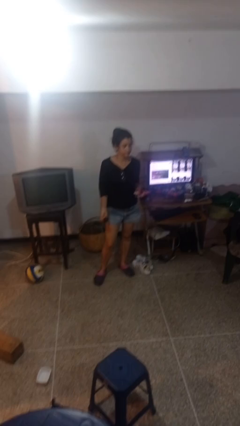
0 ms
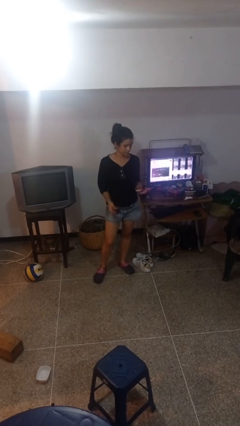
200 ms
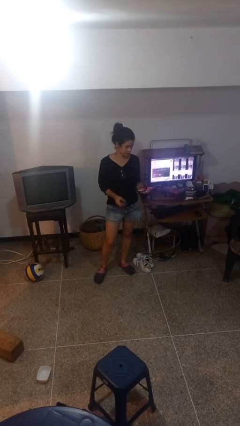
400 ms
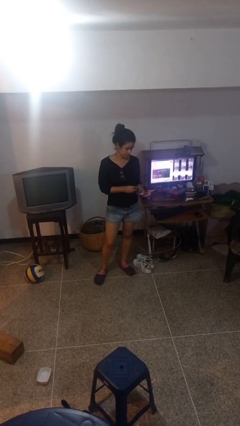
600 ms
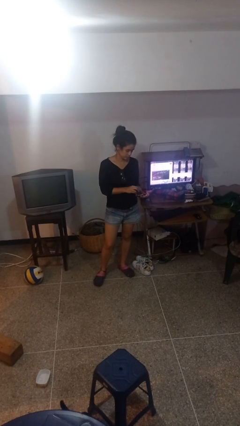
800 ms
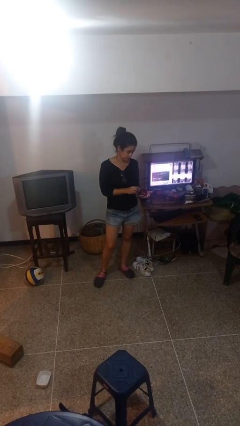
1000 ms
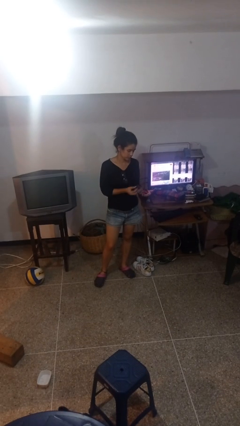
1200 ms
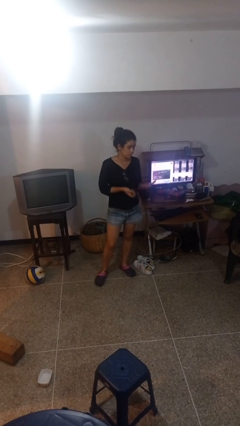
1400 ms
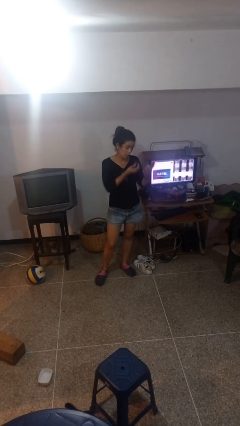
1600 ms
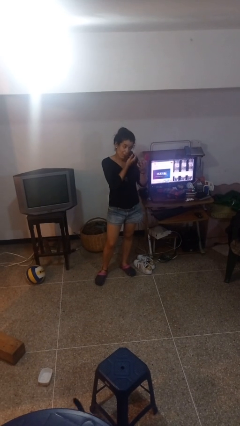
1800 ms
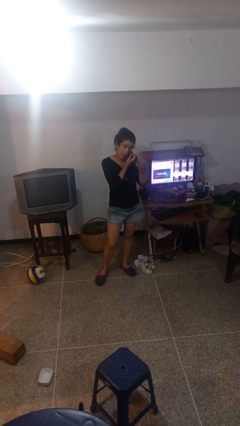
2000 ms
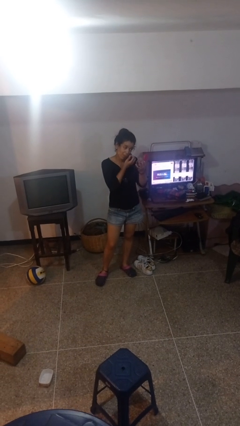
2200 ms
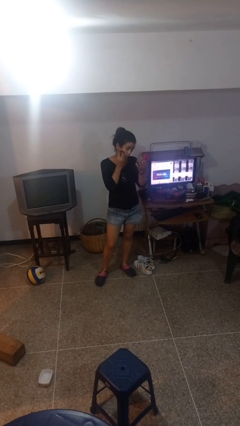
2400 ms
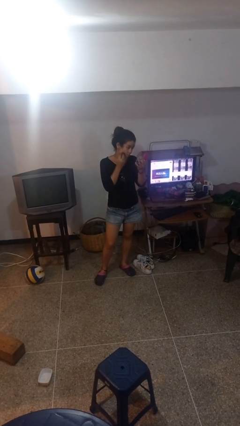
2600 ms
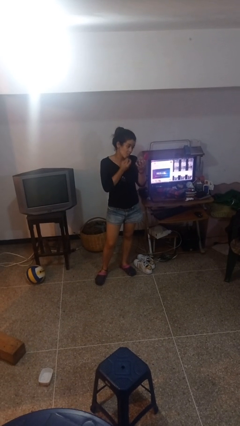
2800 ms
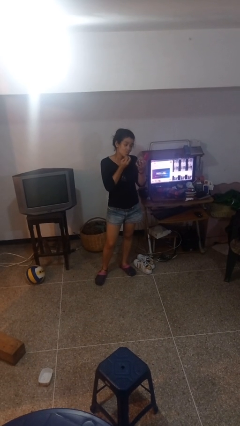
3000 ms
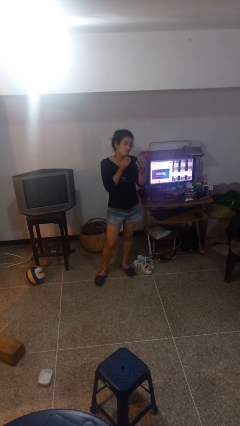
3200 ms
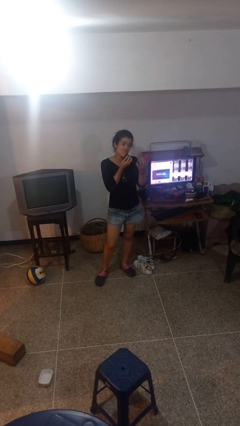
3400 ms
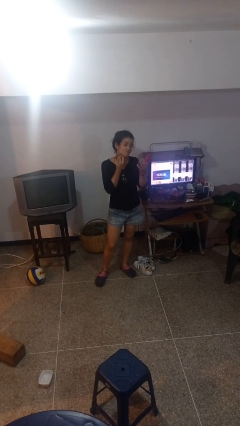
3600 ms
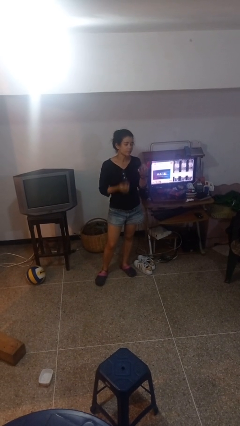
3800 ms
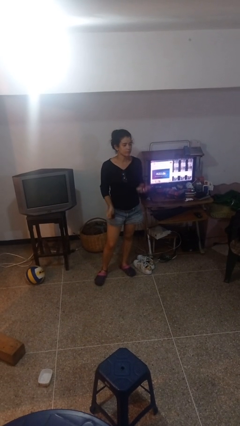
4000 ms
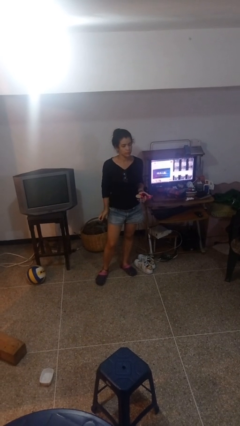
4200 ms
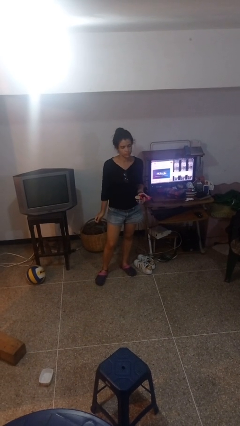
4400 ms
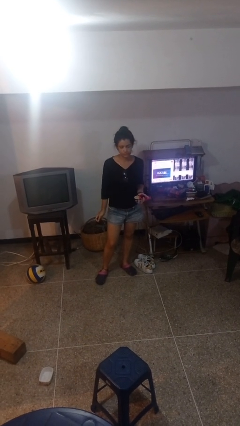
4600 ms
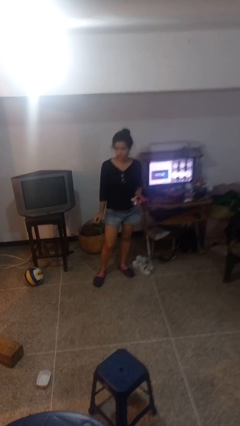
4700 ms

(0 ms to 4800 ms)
person applies foundation makeup

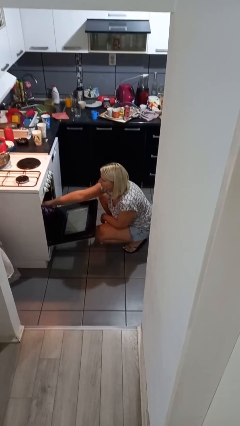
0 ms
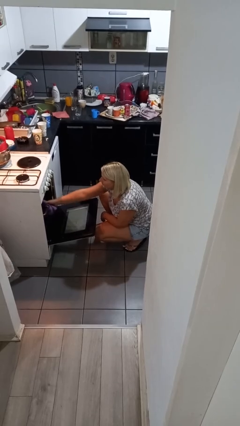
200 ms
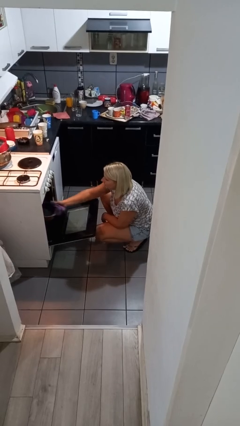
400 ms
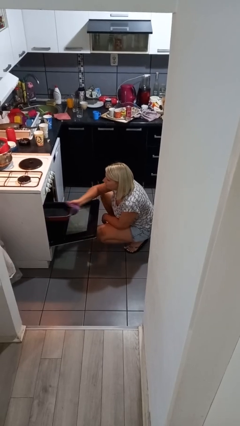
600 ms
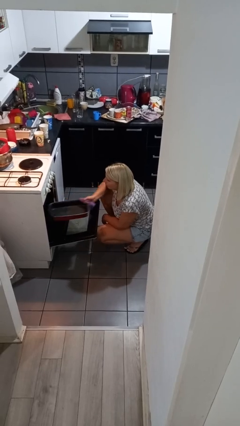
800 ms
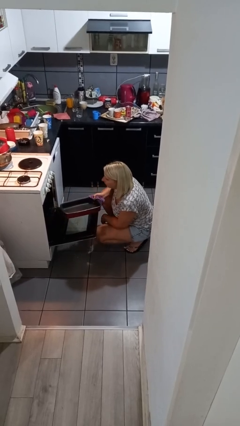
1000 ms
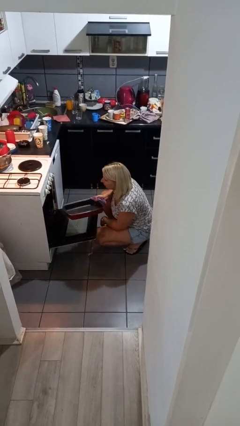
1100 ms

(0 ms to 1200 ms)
person takes object from oven

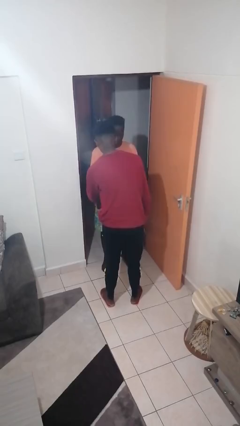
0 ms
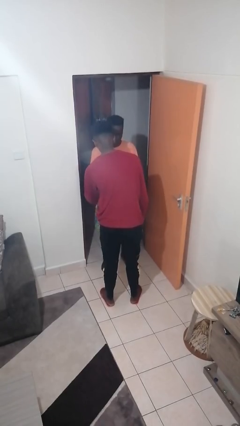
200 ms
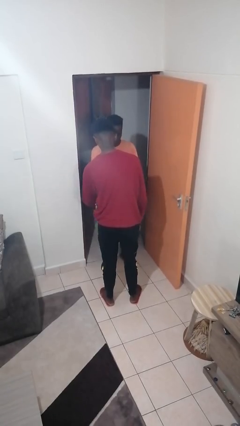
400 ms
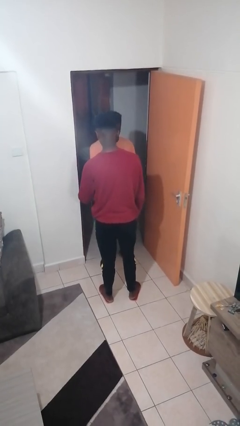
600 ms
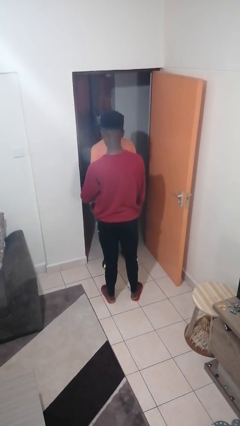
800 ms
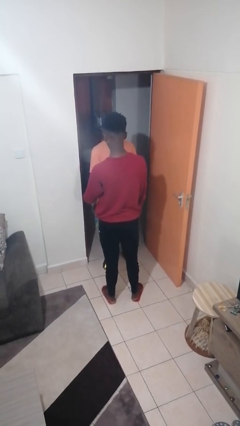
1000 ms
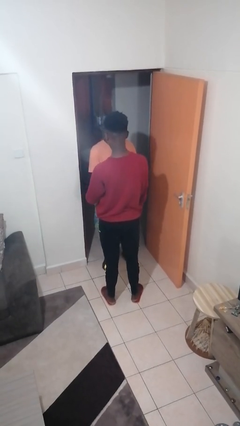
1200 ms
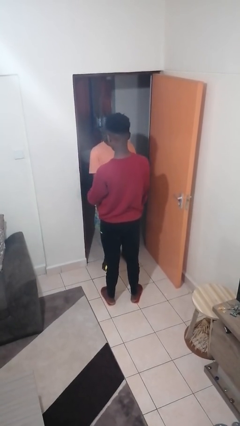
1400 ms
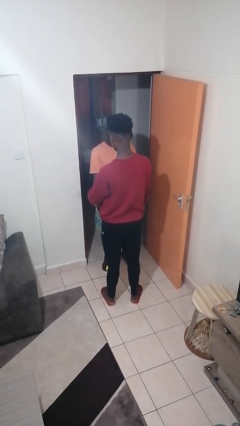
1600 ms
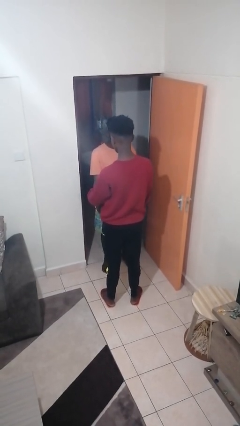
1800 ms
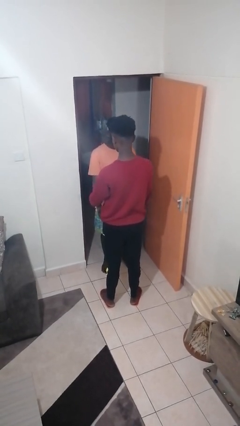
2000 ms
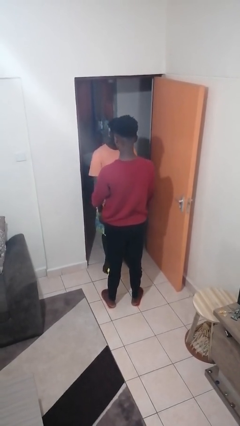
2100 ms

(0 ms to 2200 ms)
person grabs person by forearm

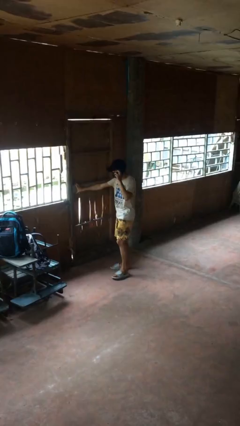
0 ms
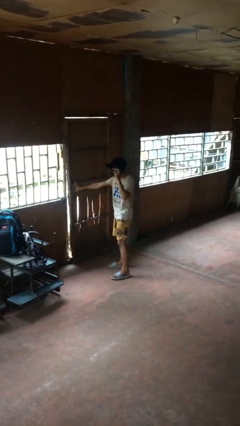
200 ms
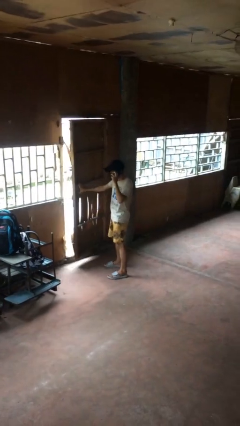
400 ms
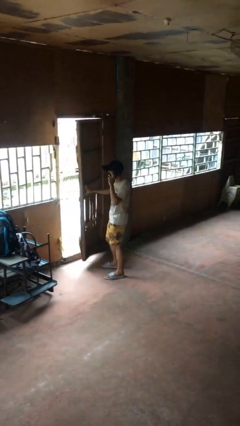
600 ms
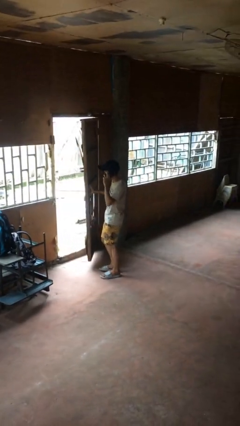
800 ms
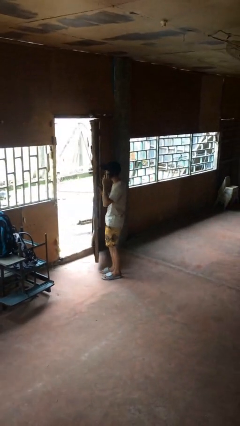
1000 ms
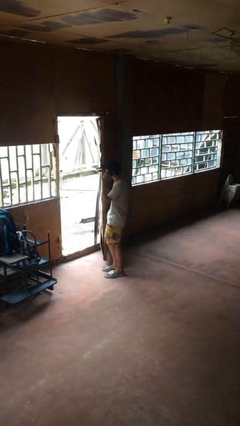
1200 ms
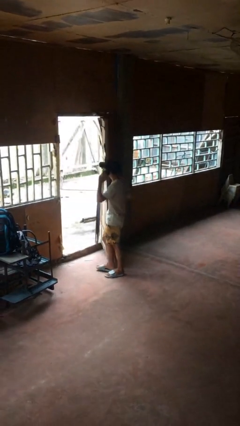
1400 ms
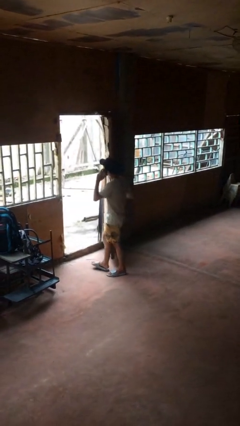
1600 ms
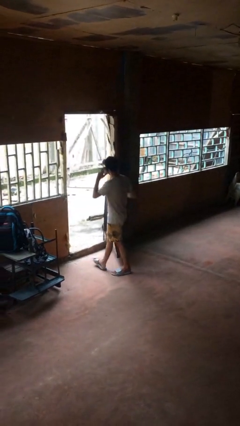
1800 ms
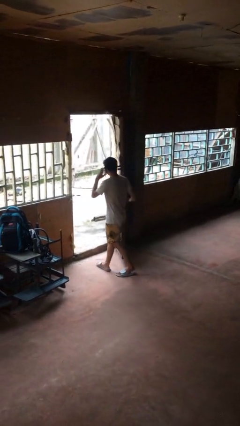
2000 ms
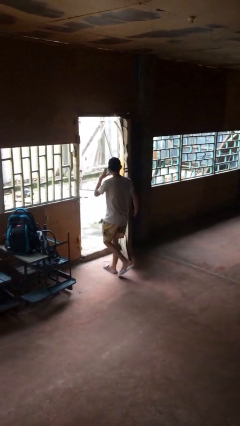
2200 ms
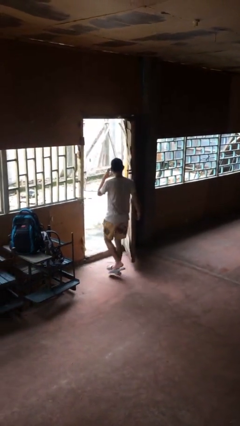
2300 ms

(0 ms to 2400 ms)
person opens facility door

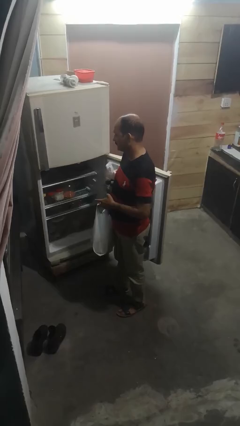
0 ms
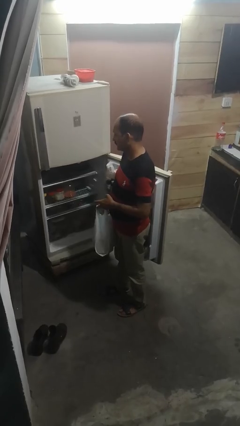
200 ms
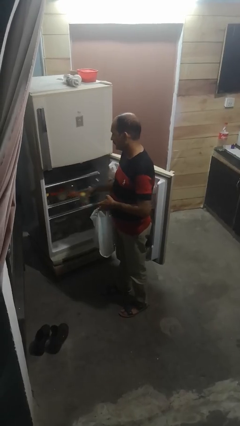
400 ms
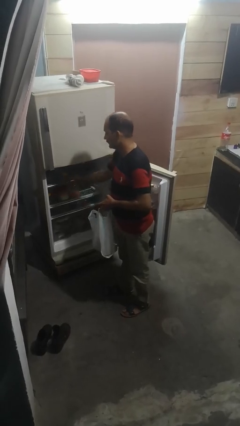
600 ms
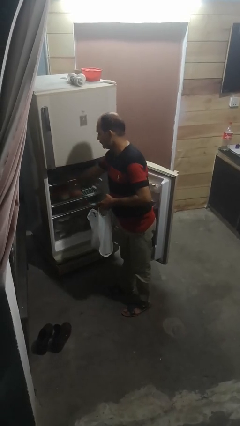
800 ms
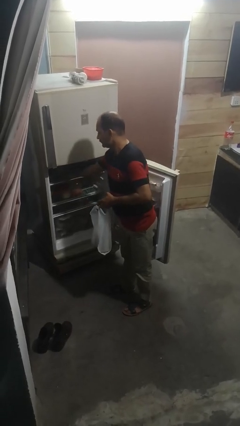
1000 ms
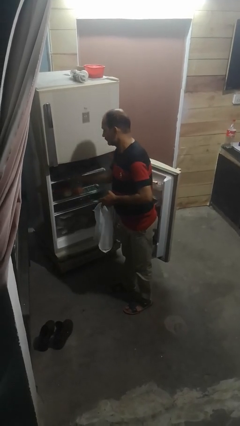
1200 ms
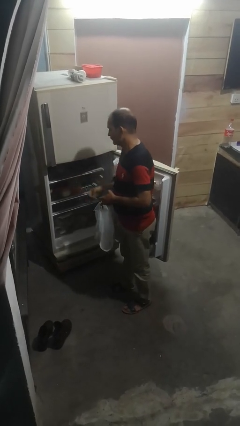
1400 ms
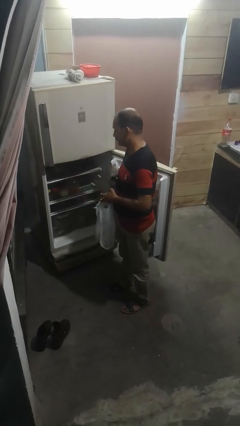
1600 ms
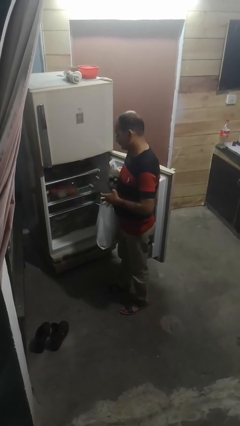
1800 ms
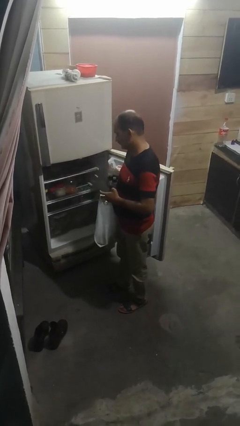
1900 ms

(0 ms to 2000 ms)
person loads groceries into refrigerator

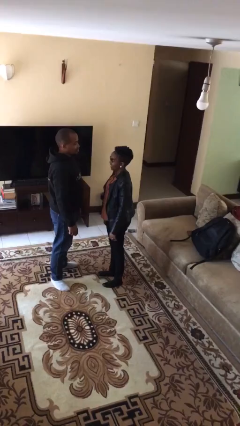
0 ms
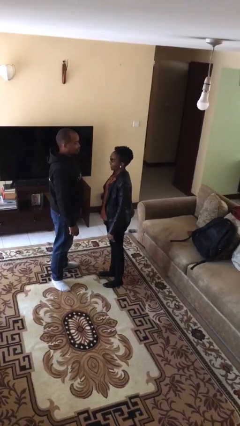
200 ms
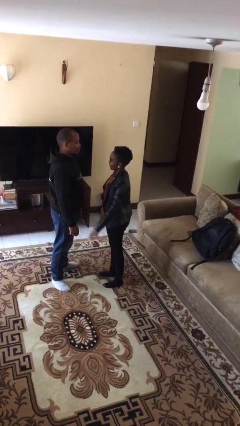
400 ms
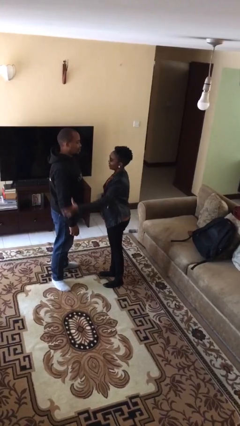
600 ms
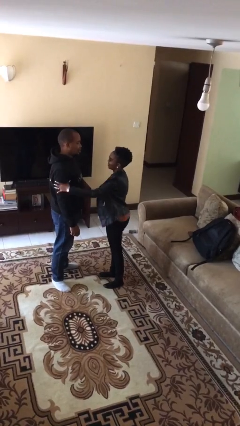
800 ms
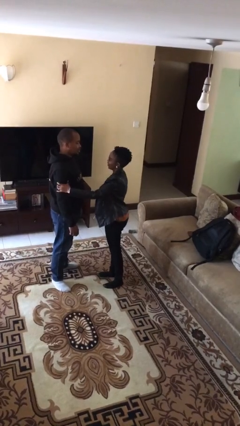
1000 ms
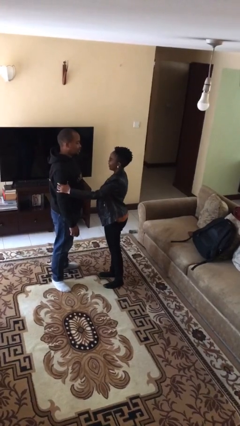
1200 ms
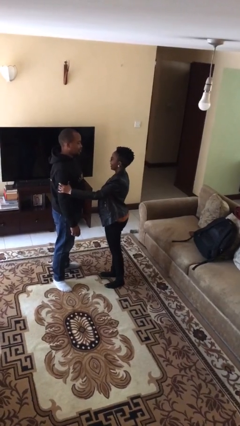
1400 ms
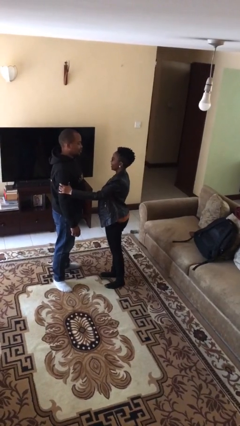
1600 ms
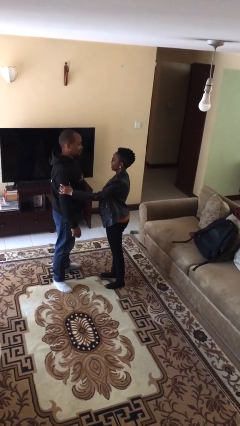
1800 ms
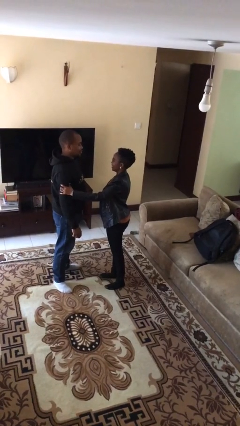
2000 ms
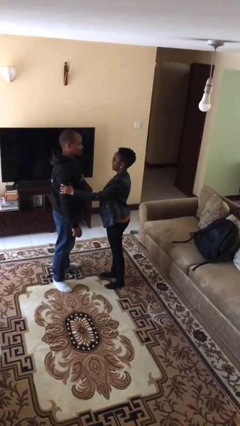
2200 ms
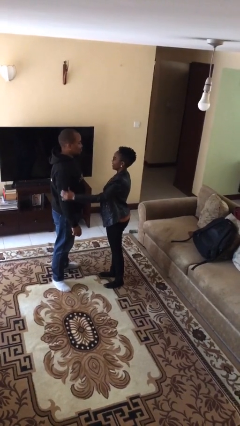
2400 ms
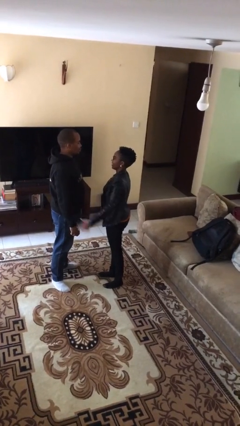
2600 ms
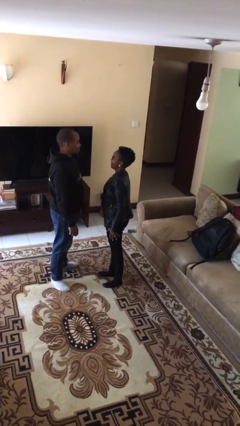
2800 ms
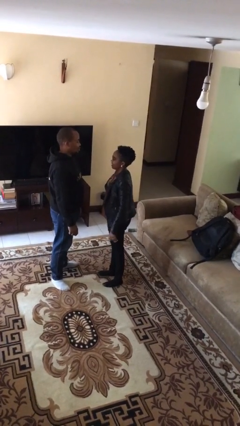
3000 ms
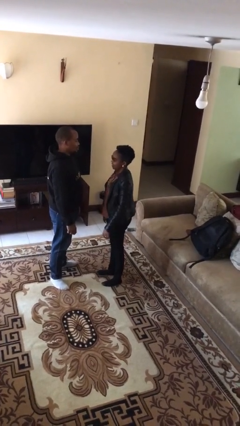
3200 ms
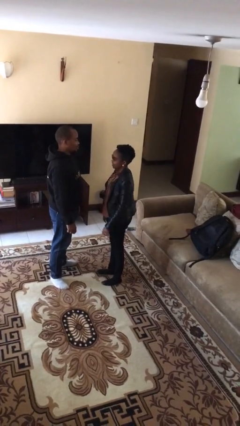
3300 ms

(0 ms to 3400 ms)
person grabs person by bicep

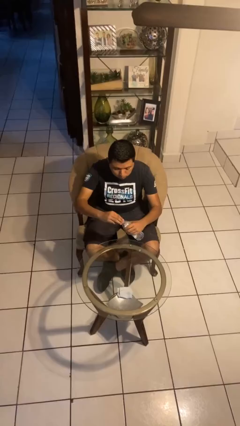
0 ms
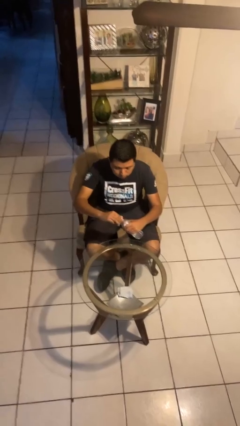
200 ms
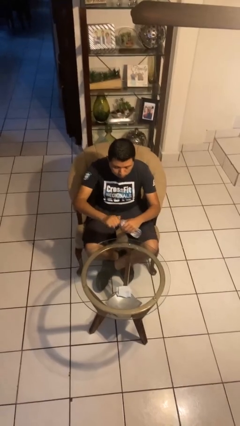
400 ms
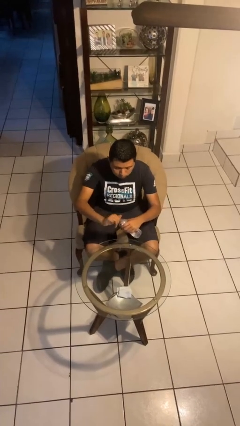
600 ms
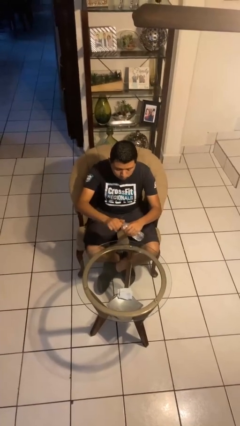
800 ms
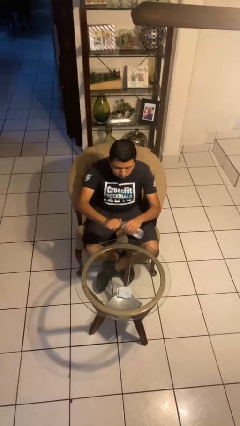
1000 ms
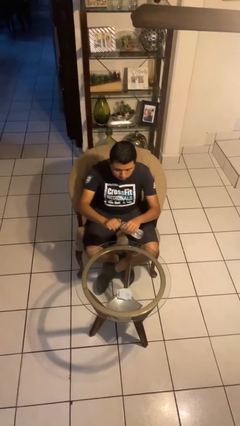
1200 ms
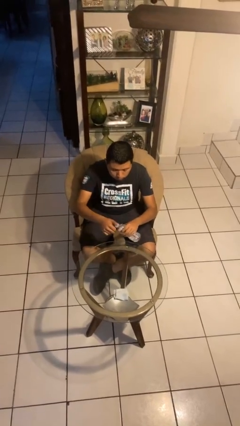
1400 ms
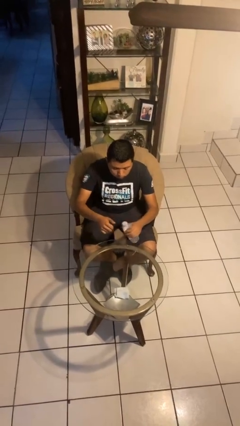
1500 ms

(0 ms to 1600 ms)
person screws lid to bottle
